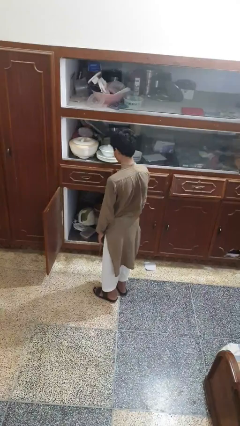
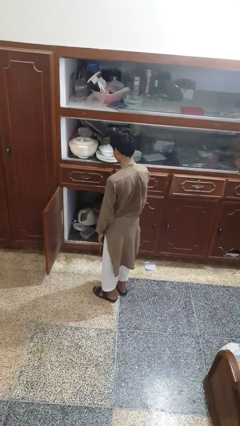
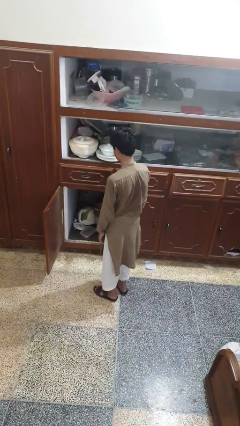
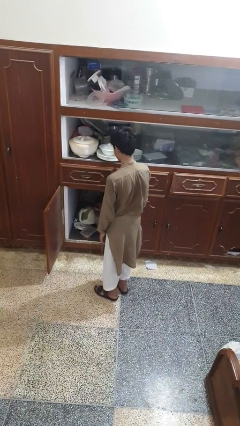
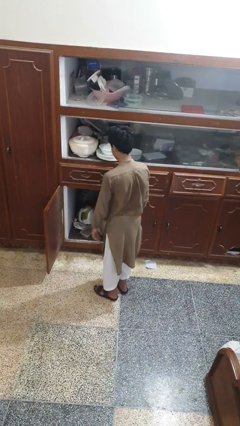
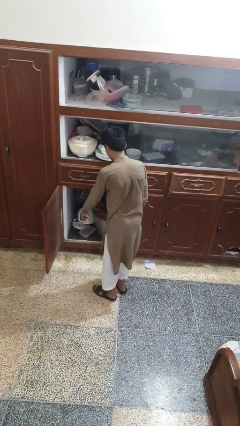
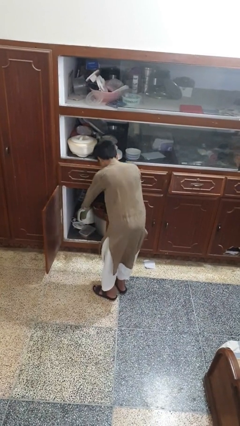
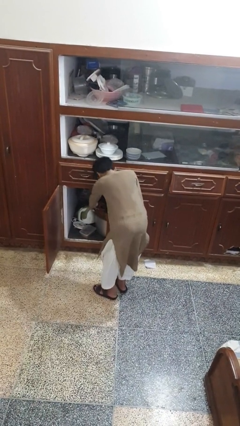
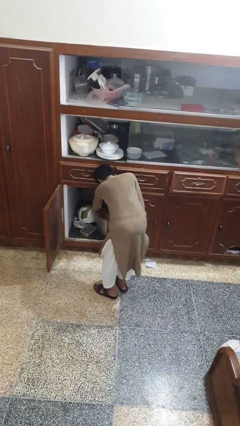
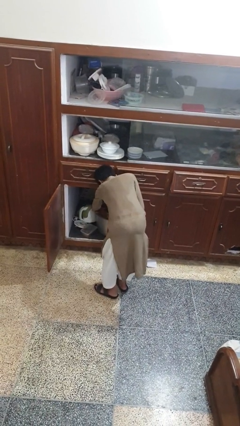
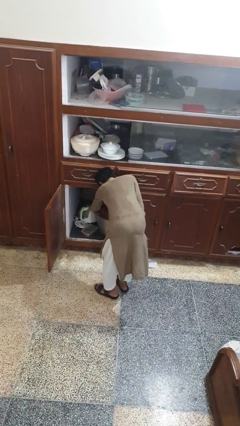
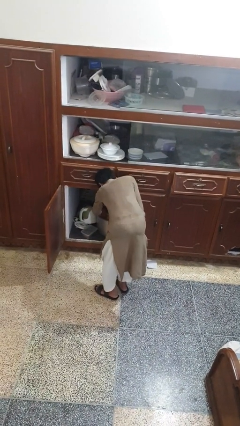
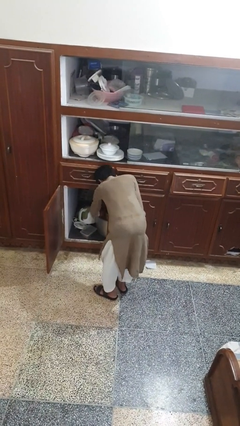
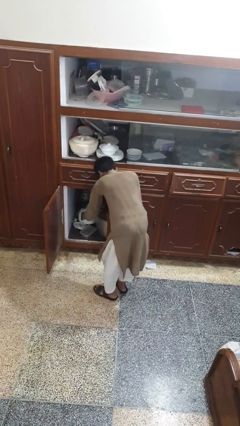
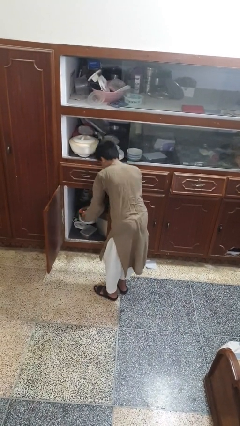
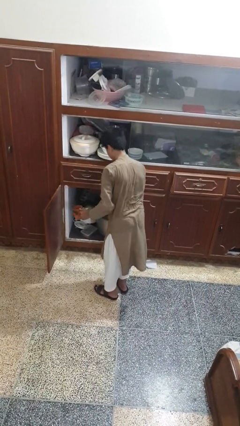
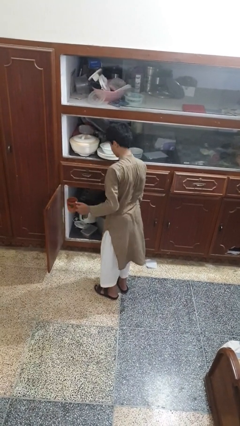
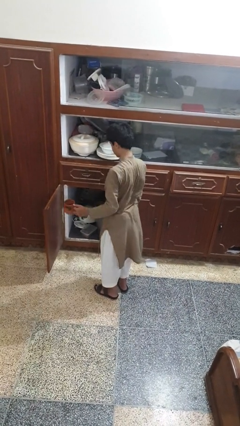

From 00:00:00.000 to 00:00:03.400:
person takes object from cabinet

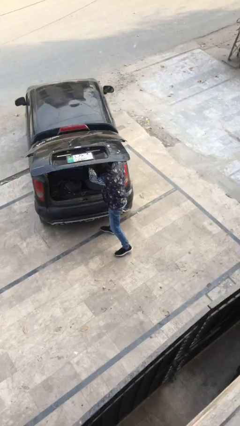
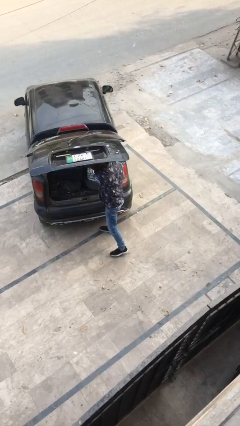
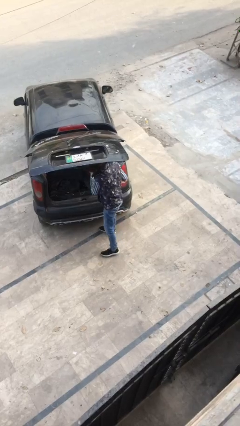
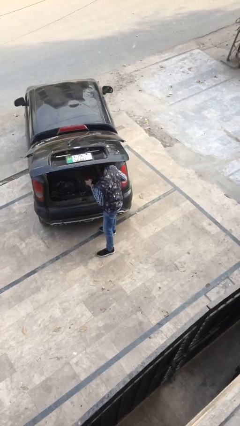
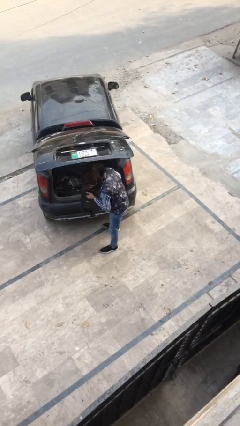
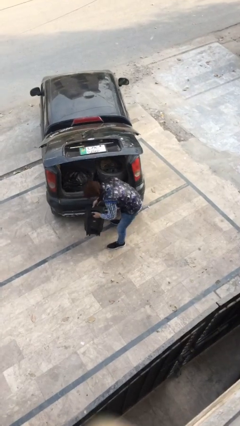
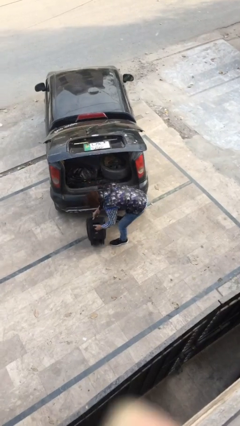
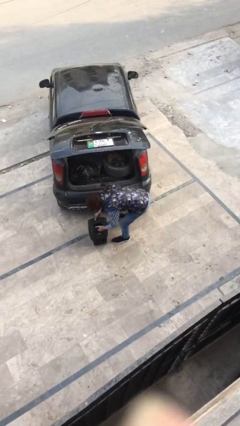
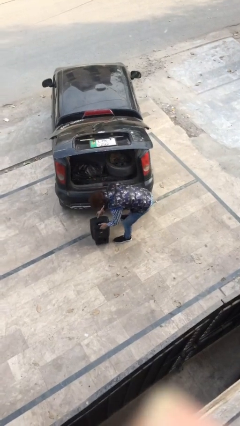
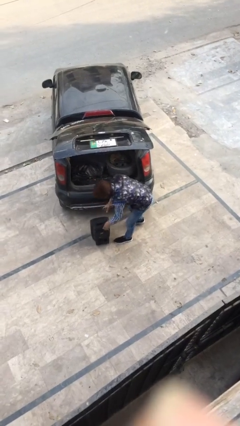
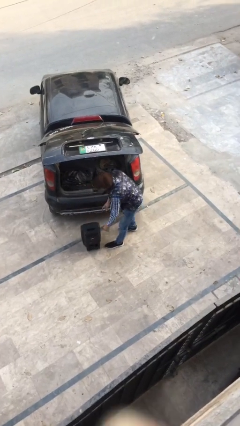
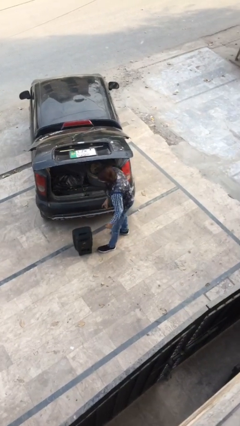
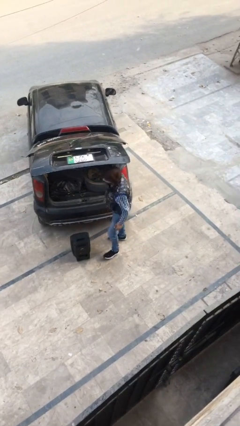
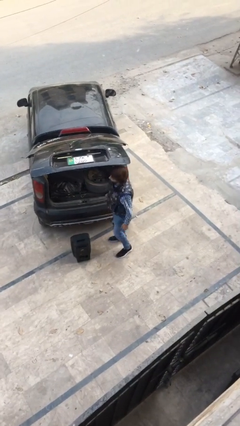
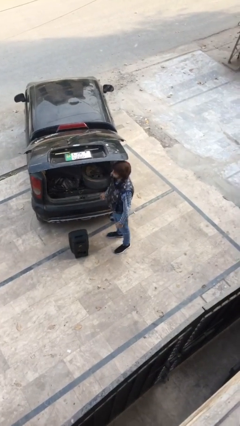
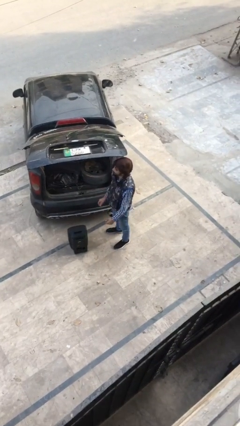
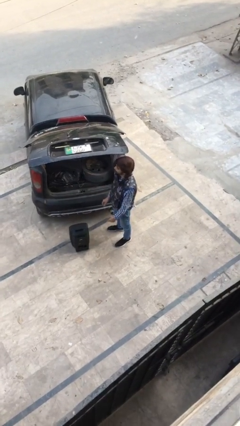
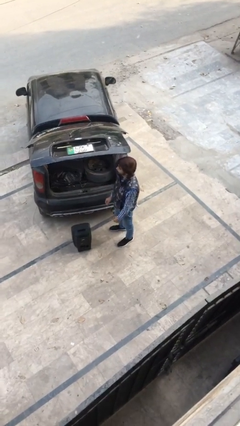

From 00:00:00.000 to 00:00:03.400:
person unloads car

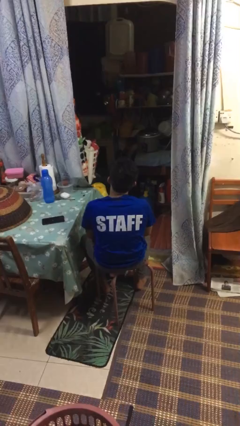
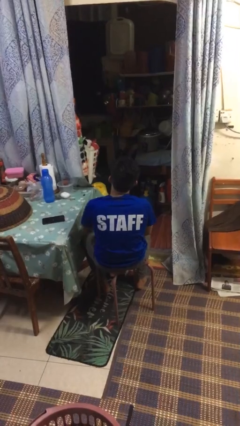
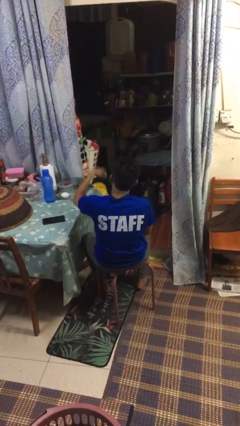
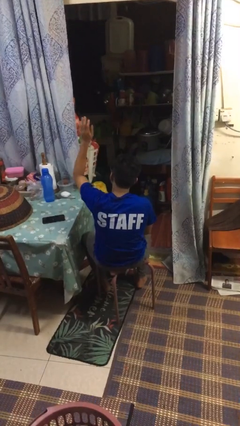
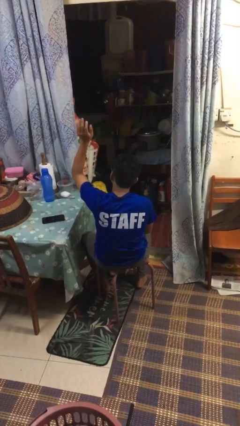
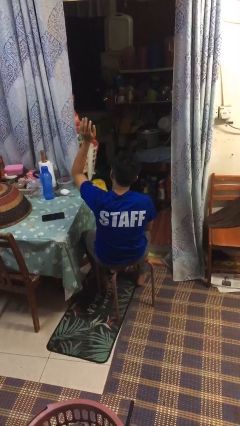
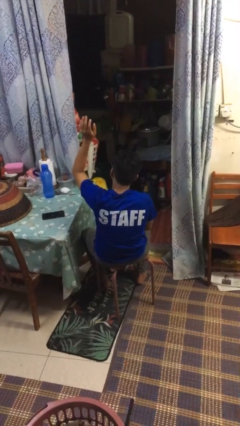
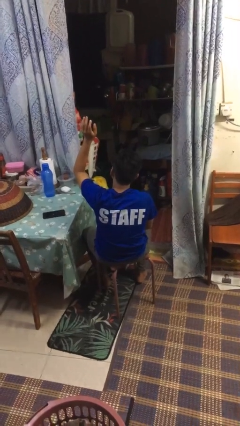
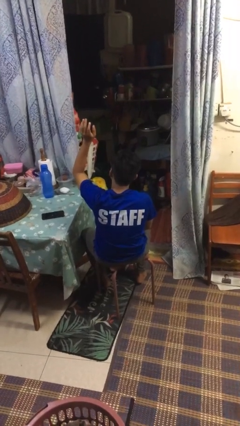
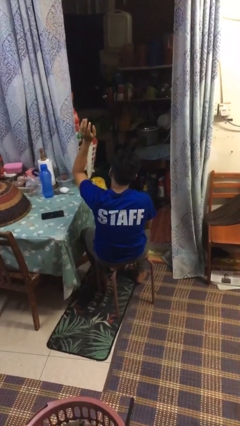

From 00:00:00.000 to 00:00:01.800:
person gestures swipe up

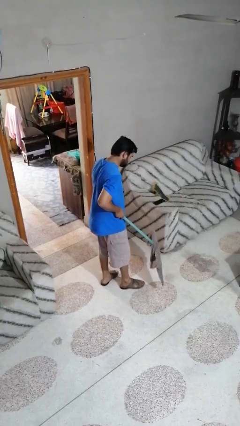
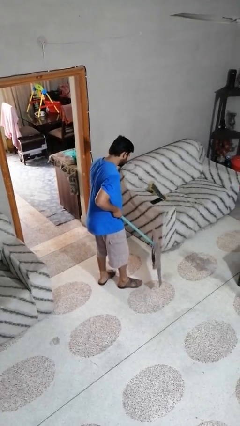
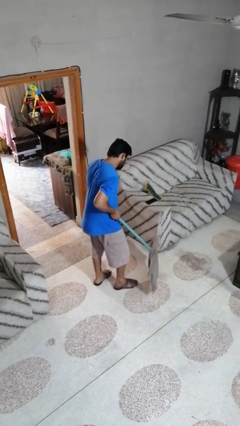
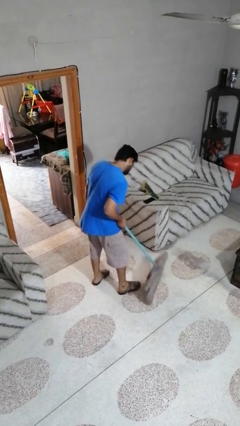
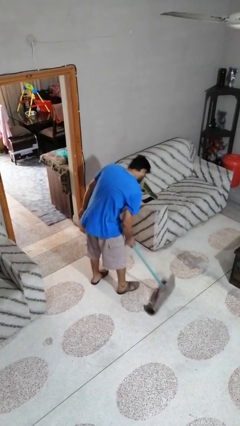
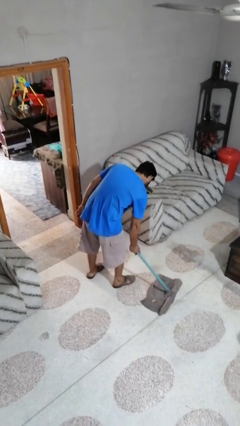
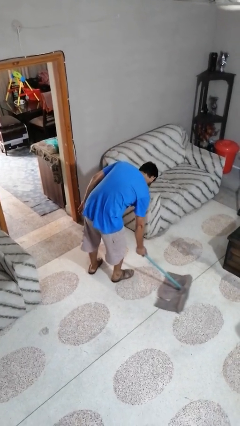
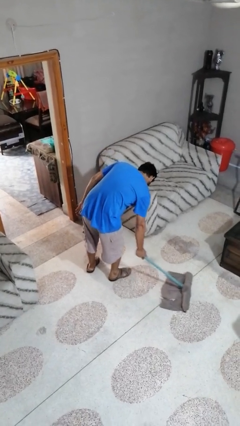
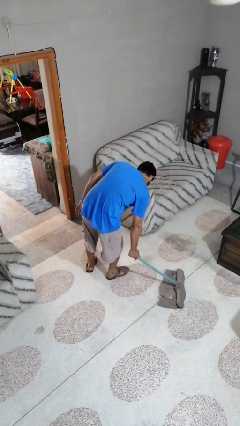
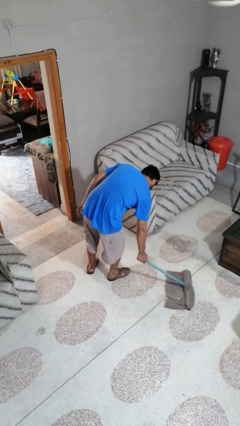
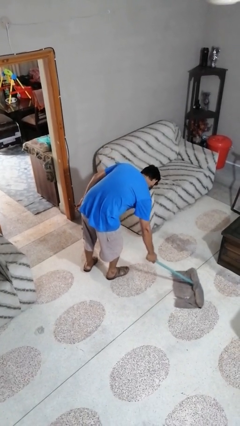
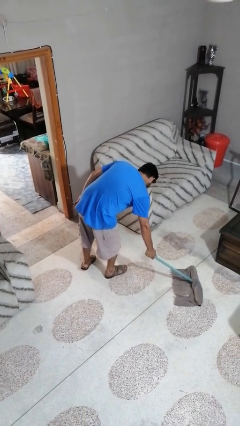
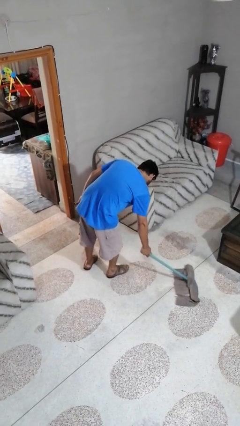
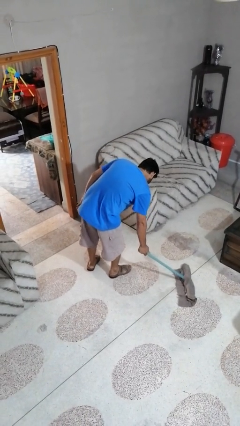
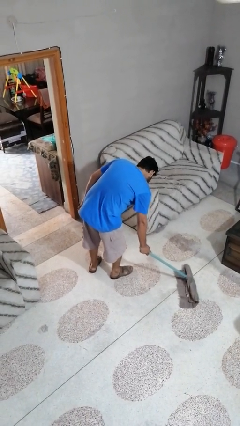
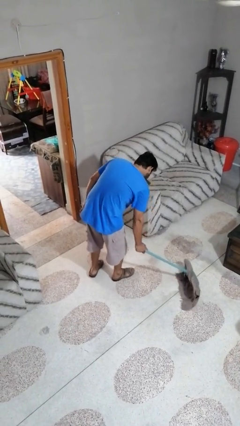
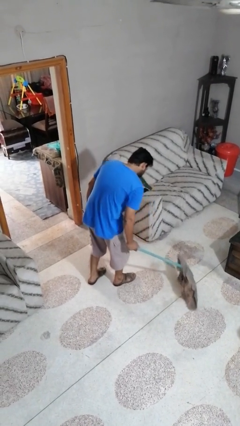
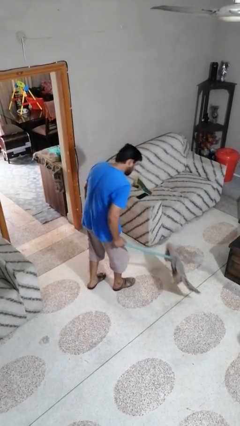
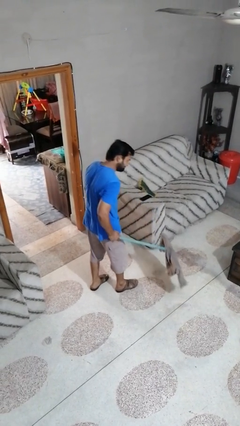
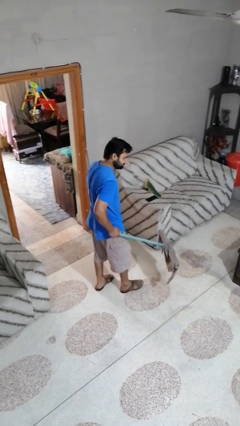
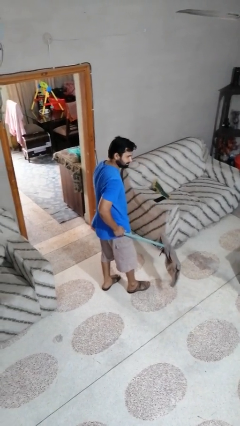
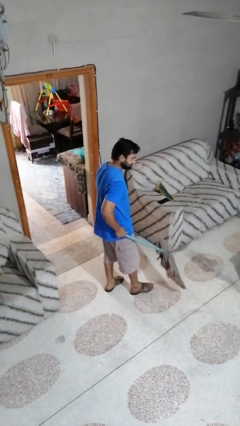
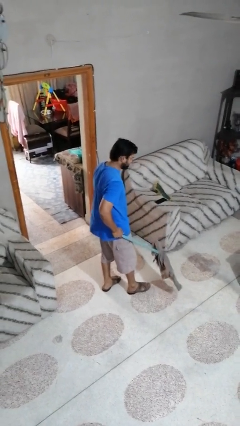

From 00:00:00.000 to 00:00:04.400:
person mops

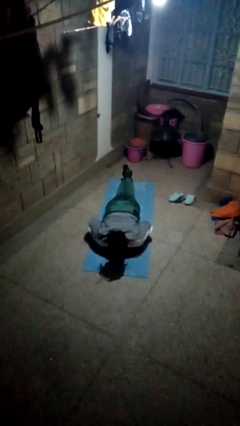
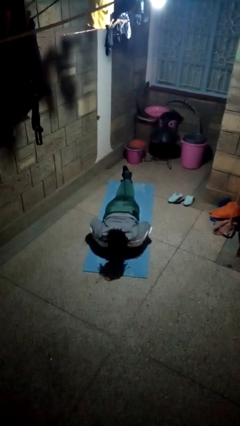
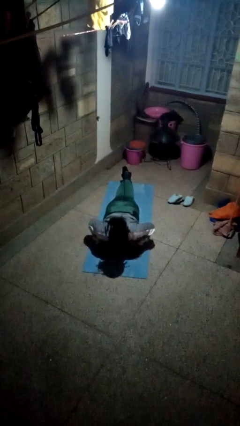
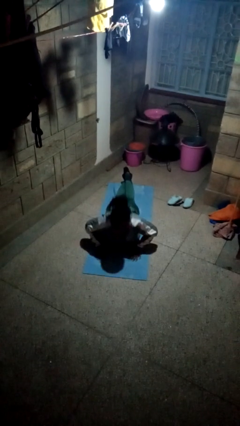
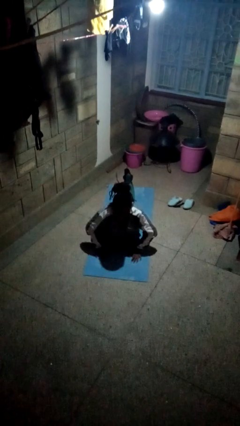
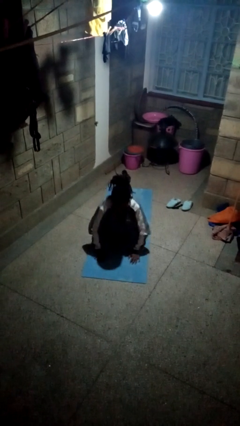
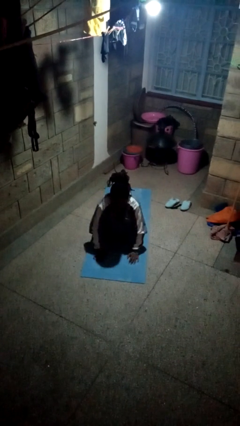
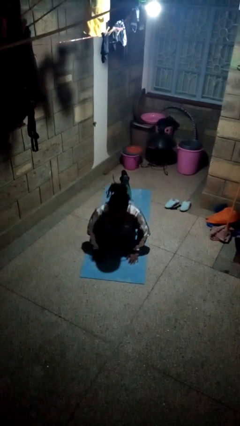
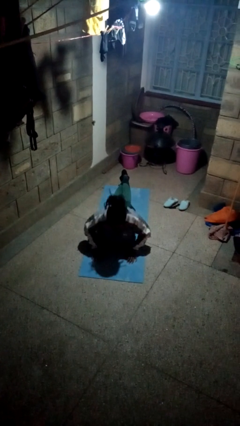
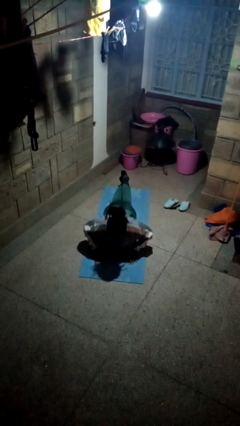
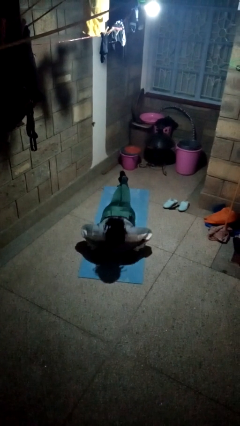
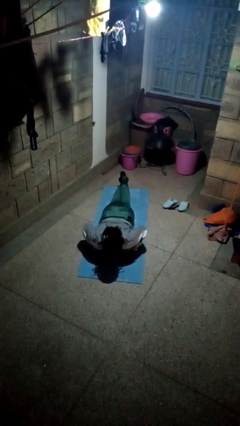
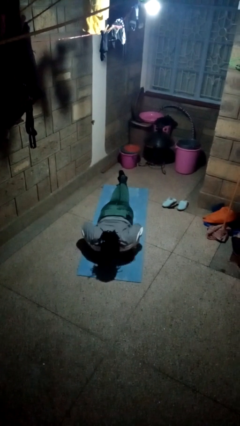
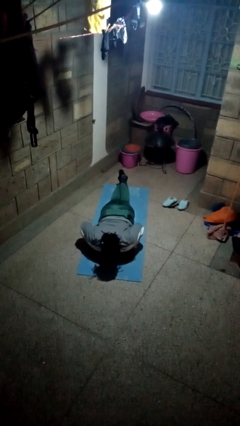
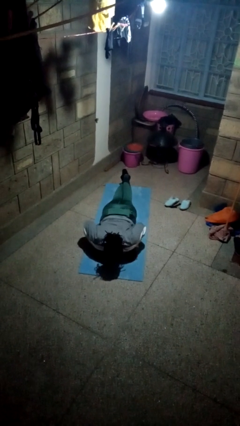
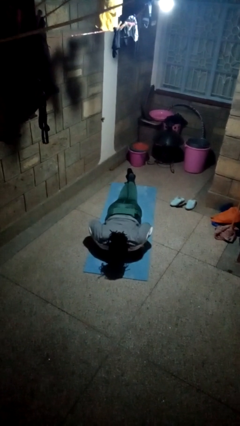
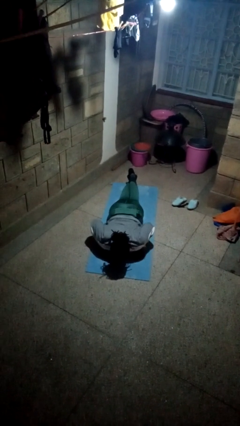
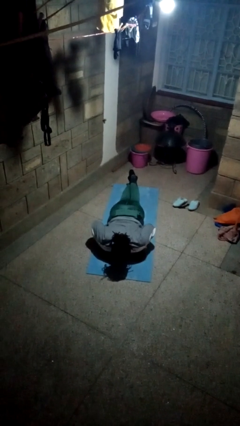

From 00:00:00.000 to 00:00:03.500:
person exercises with pushup

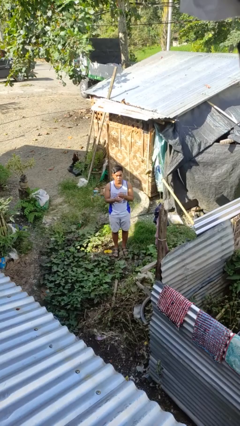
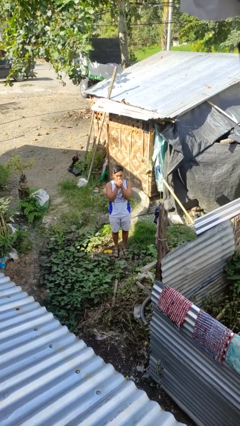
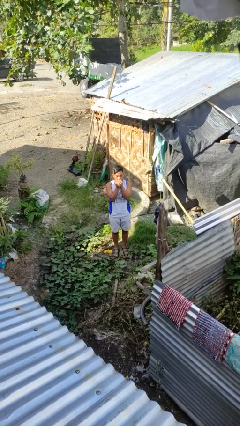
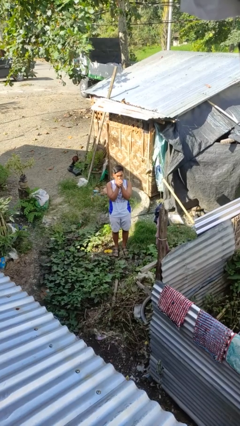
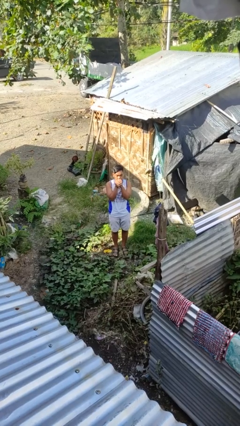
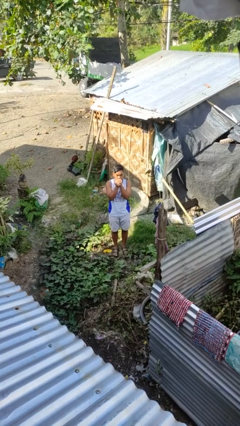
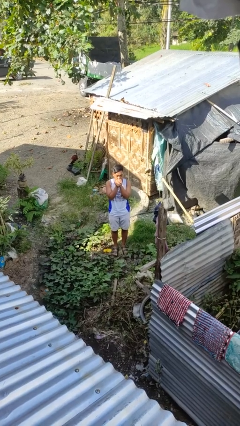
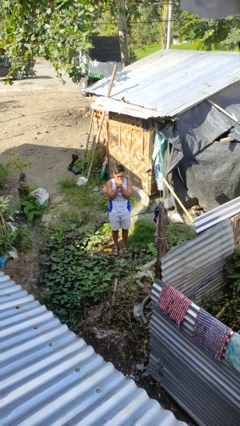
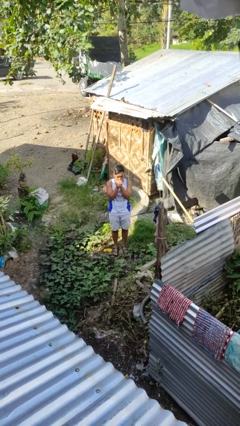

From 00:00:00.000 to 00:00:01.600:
person blows into hands
